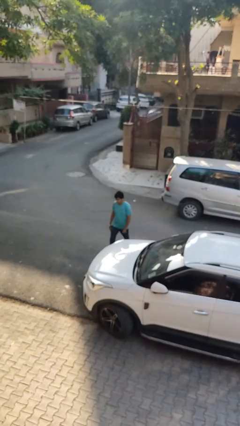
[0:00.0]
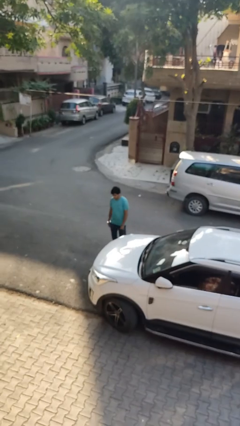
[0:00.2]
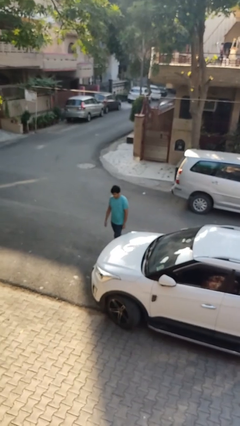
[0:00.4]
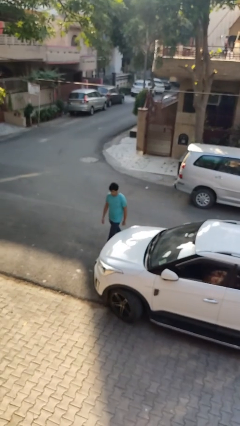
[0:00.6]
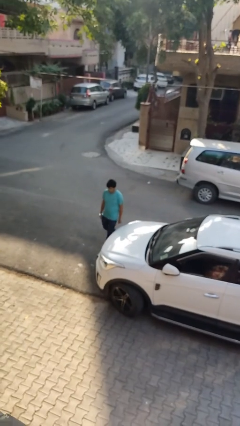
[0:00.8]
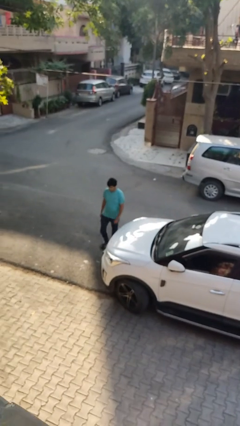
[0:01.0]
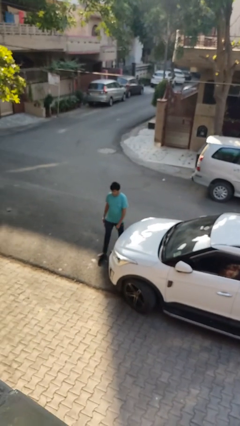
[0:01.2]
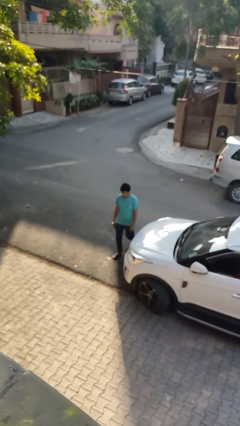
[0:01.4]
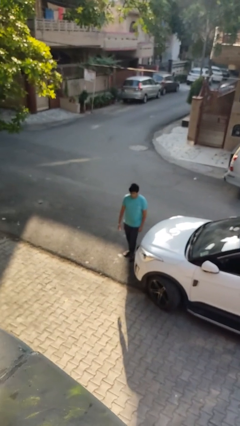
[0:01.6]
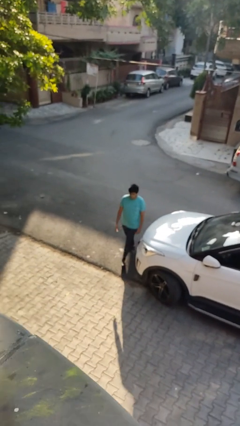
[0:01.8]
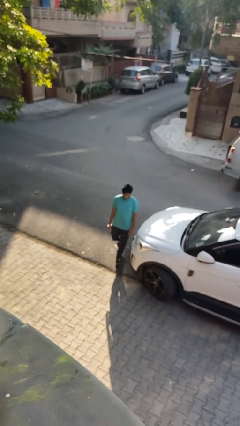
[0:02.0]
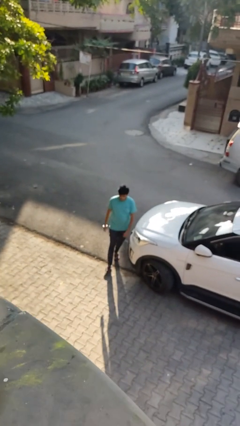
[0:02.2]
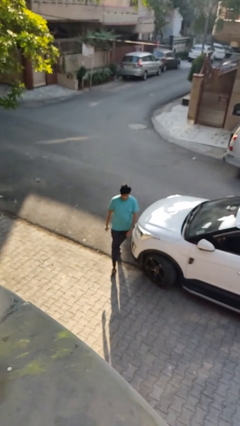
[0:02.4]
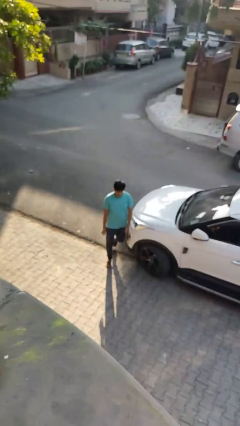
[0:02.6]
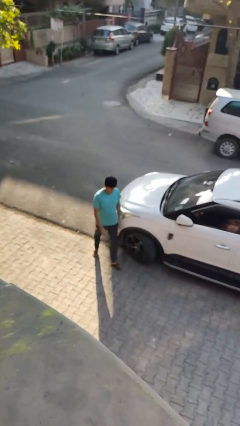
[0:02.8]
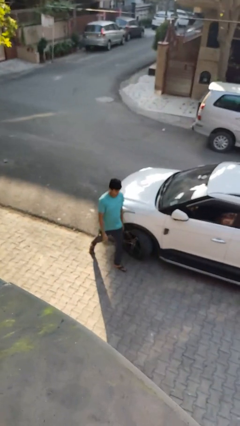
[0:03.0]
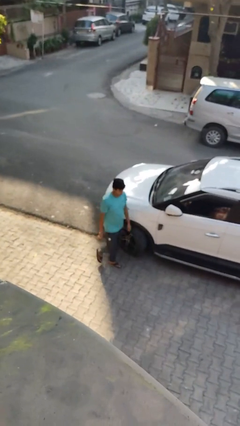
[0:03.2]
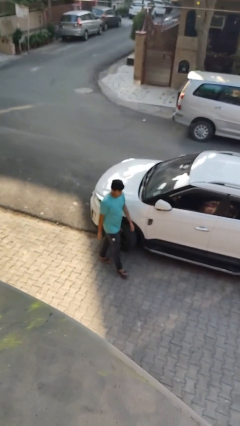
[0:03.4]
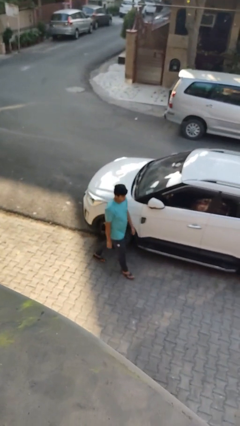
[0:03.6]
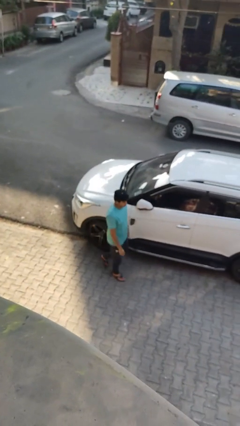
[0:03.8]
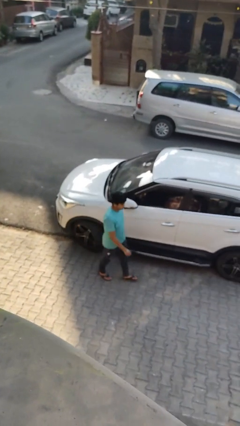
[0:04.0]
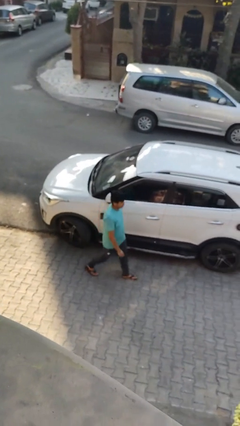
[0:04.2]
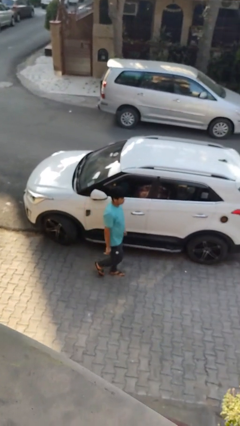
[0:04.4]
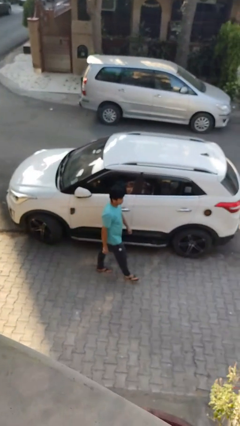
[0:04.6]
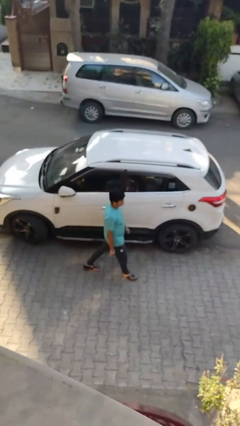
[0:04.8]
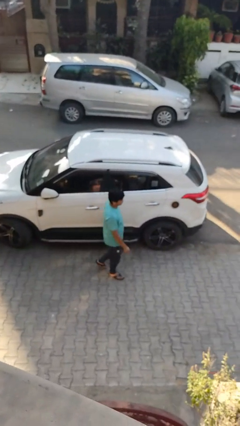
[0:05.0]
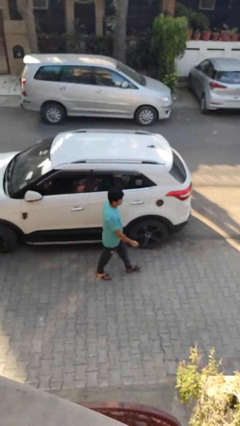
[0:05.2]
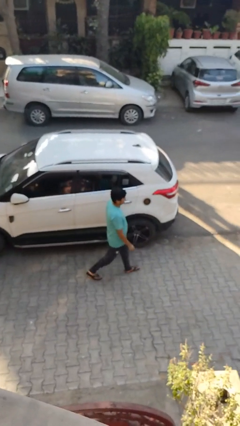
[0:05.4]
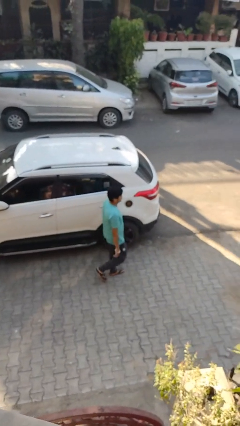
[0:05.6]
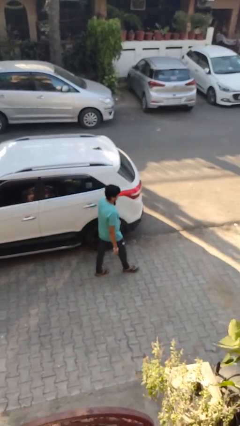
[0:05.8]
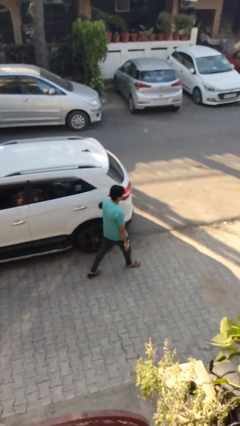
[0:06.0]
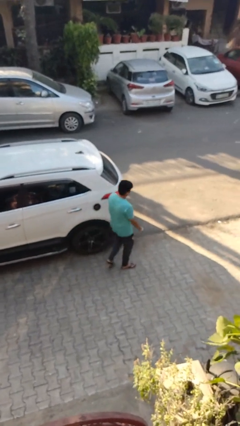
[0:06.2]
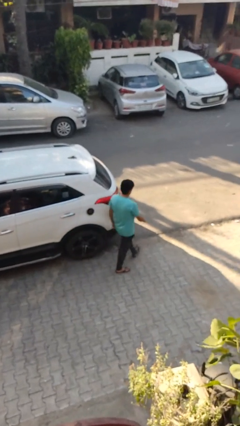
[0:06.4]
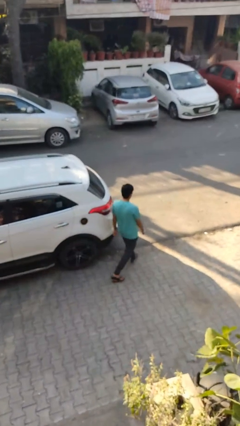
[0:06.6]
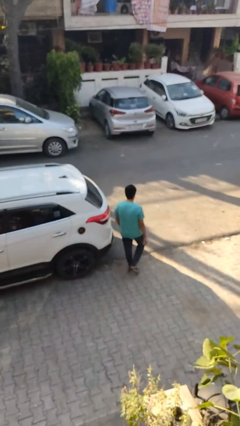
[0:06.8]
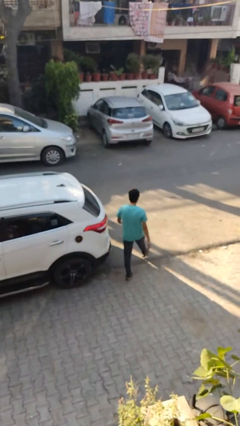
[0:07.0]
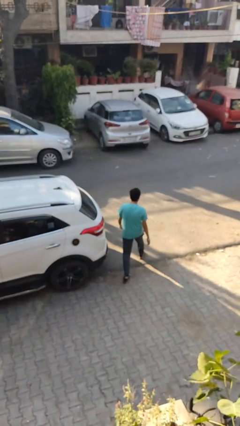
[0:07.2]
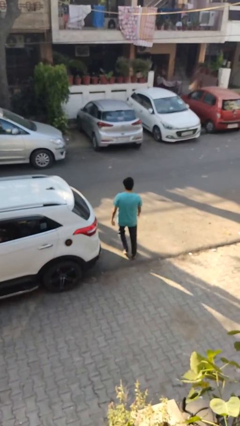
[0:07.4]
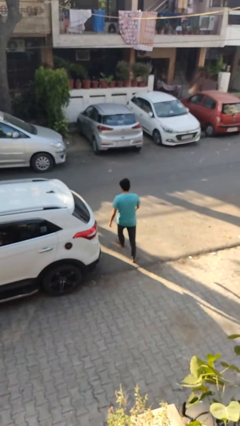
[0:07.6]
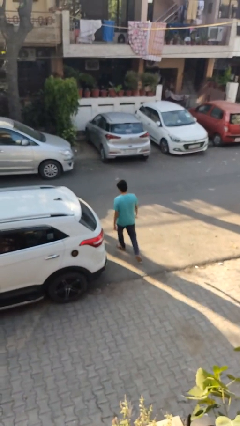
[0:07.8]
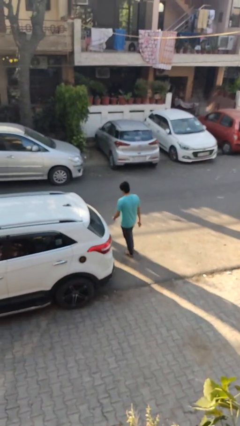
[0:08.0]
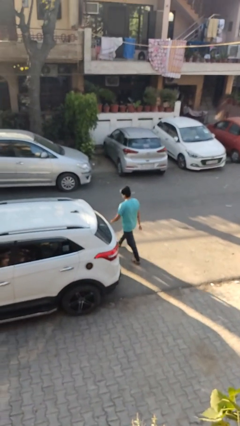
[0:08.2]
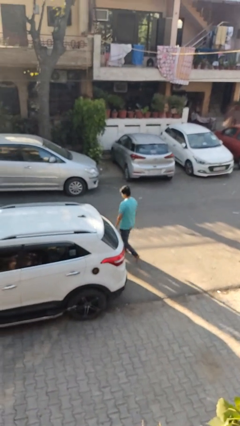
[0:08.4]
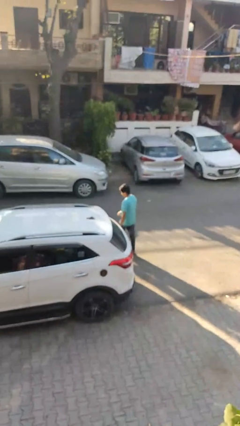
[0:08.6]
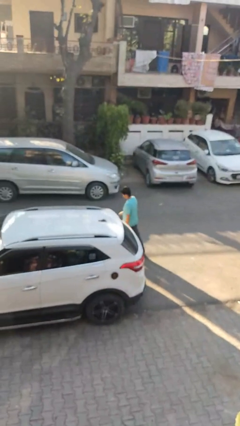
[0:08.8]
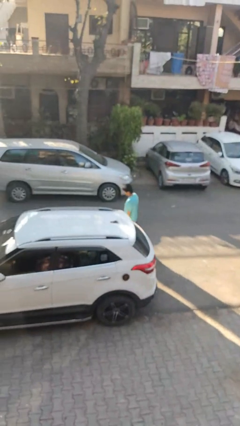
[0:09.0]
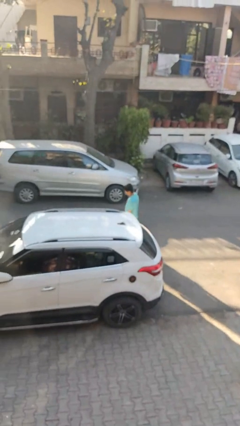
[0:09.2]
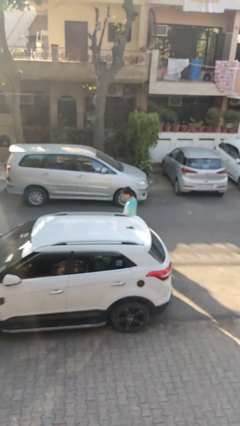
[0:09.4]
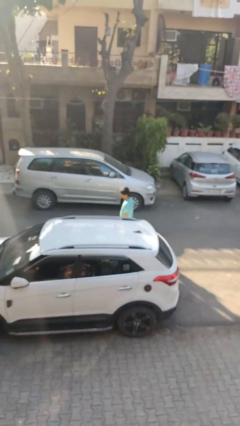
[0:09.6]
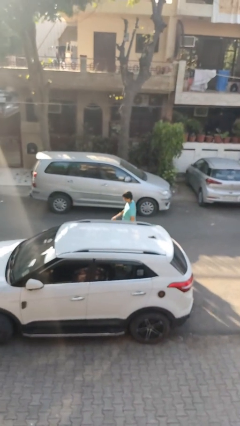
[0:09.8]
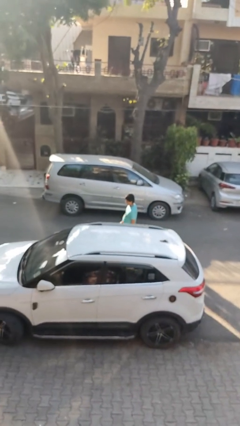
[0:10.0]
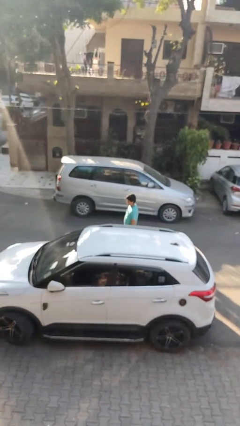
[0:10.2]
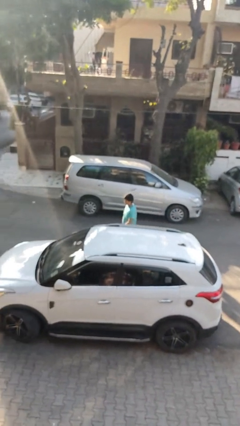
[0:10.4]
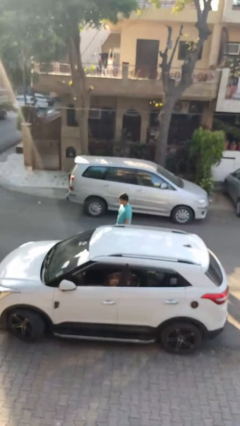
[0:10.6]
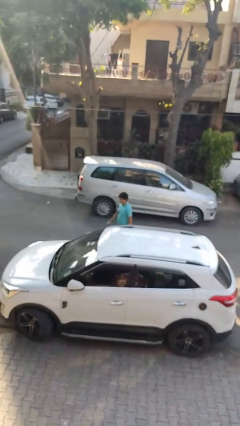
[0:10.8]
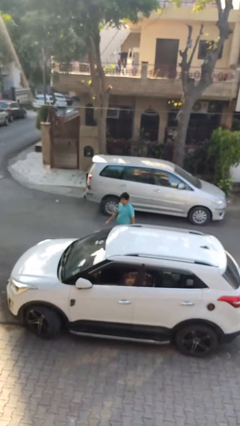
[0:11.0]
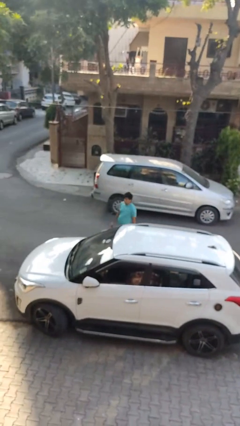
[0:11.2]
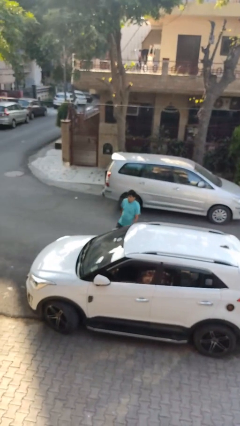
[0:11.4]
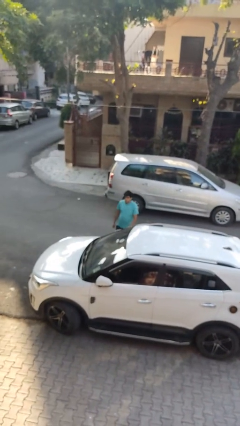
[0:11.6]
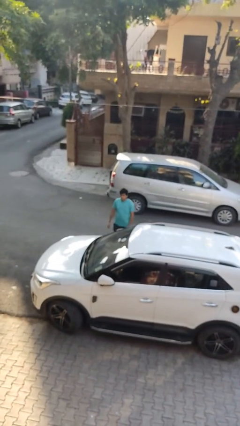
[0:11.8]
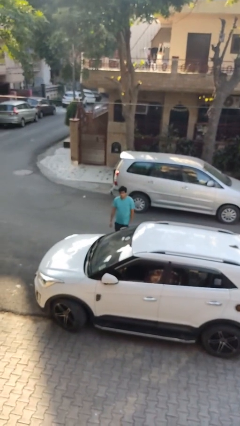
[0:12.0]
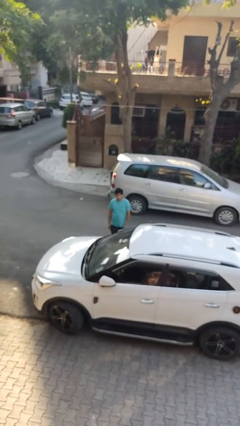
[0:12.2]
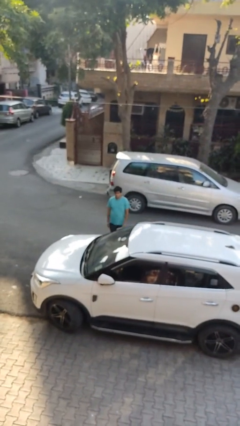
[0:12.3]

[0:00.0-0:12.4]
person walks around car

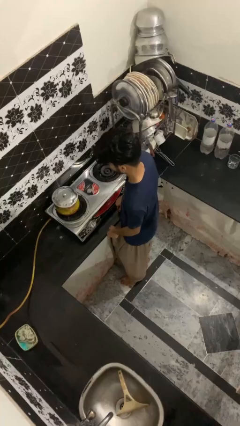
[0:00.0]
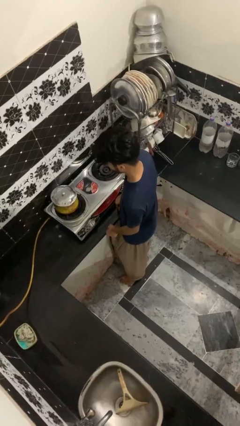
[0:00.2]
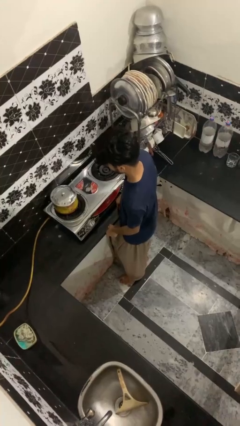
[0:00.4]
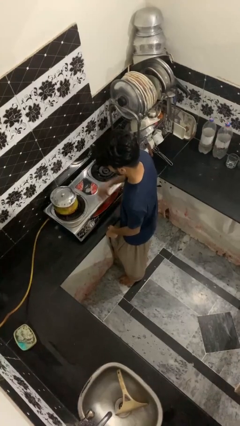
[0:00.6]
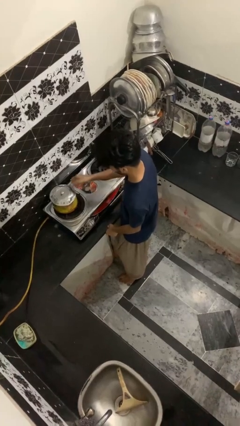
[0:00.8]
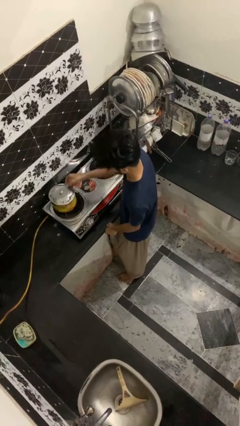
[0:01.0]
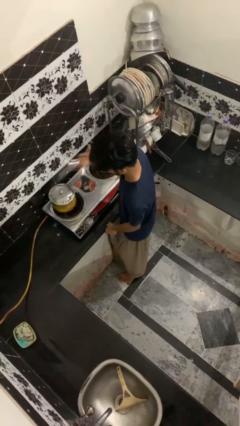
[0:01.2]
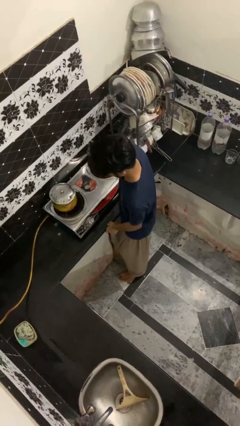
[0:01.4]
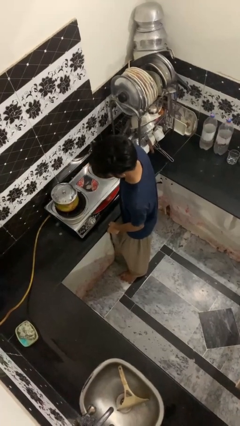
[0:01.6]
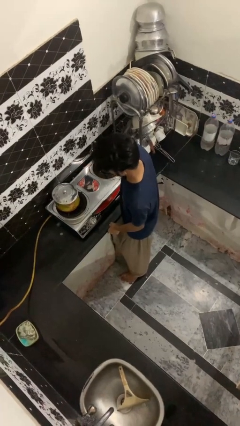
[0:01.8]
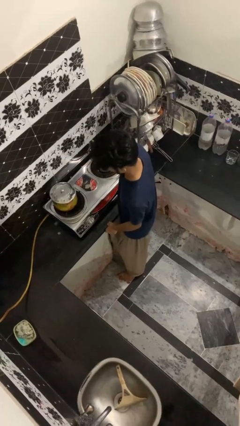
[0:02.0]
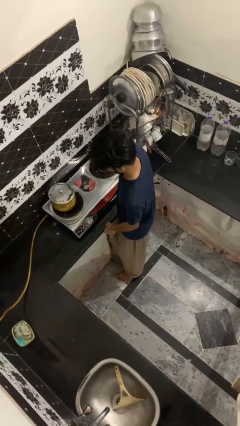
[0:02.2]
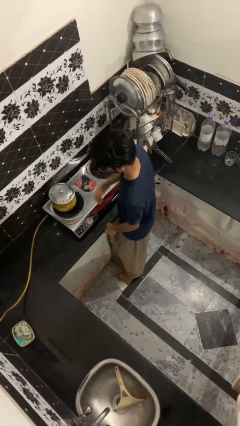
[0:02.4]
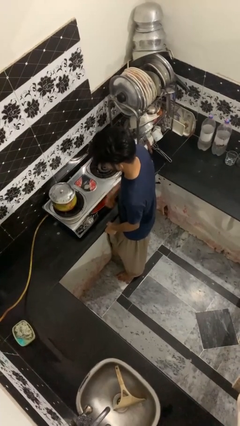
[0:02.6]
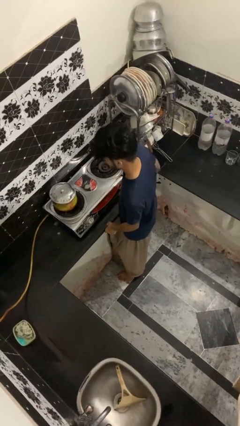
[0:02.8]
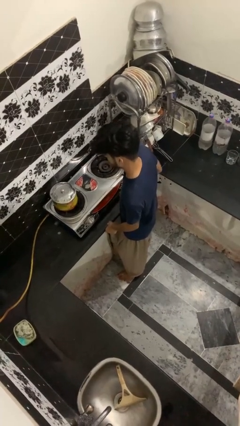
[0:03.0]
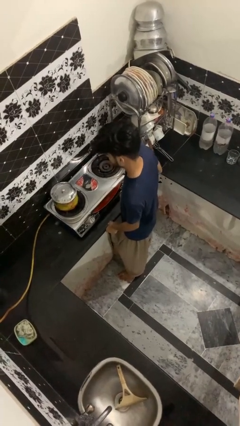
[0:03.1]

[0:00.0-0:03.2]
person burns hand

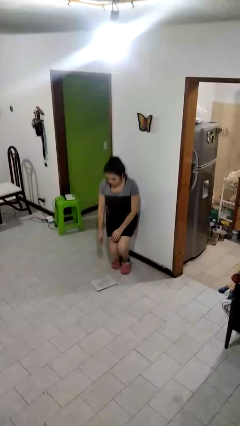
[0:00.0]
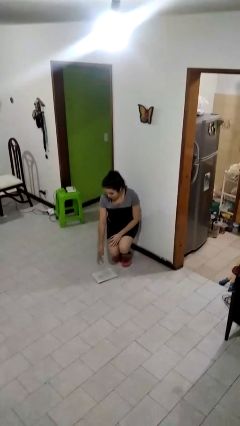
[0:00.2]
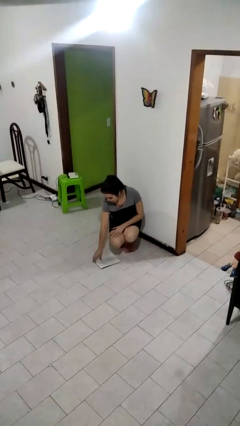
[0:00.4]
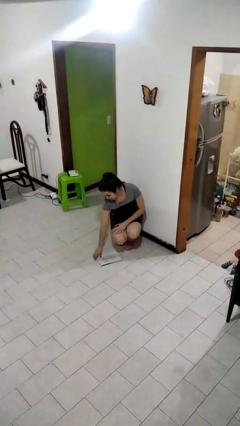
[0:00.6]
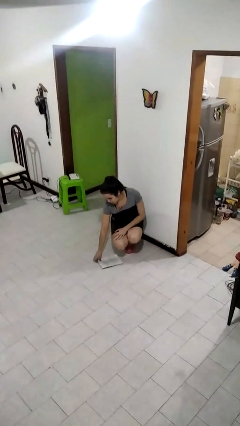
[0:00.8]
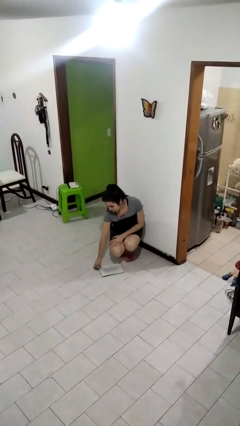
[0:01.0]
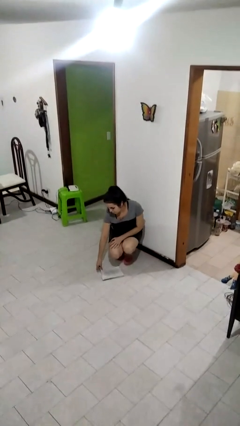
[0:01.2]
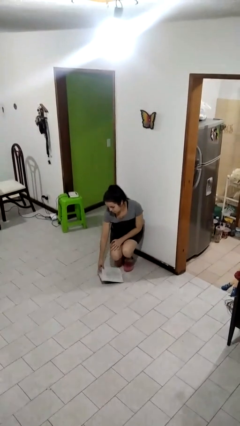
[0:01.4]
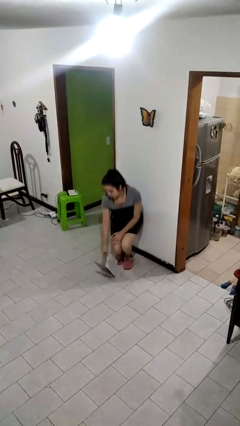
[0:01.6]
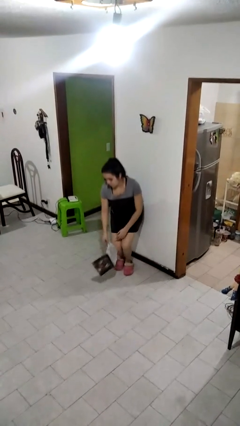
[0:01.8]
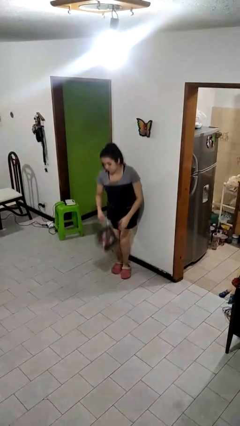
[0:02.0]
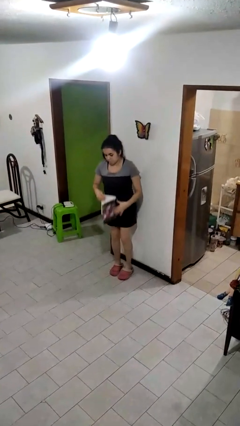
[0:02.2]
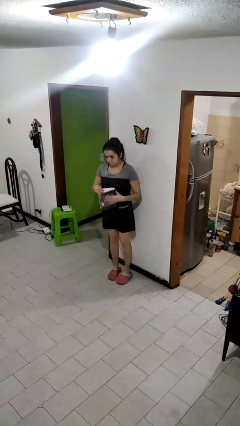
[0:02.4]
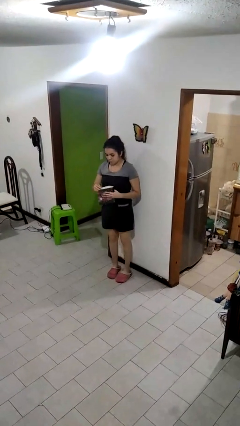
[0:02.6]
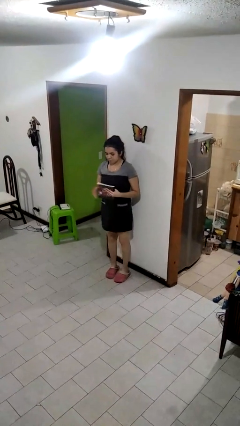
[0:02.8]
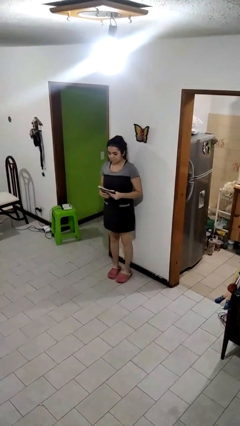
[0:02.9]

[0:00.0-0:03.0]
person picks up object from floor
